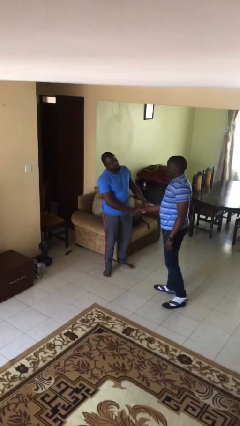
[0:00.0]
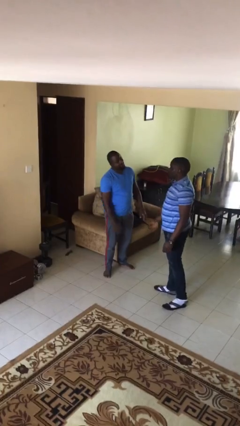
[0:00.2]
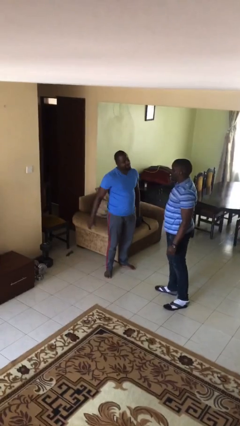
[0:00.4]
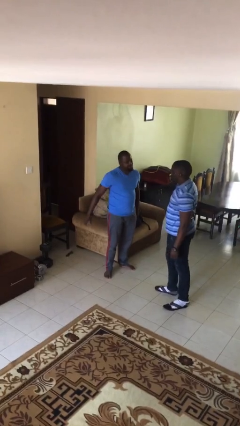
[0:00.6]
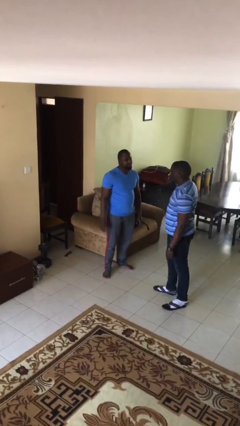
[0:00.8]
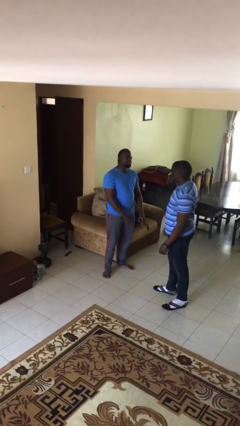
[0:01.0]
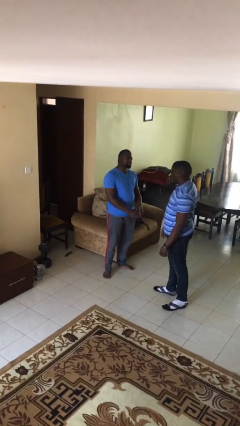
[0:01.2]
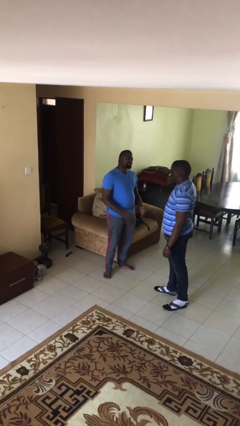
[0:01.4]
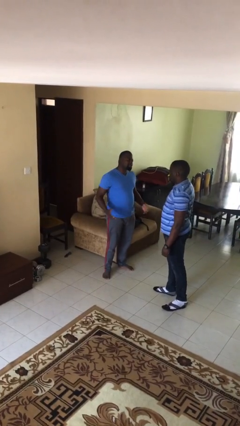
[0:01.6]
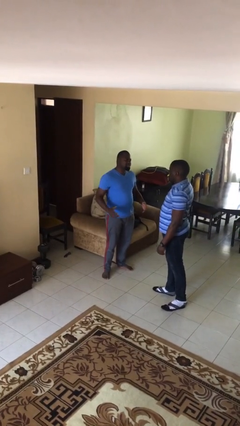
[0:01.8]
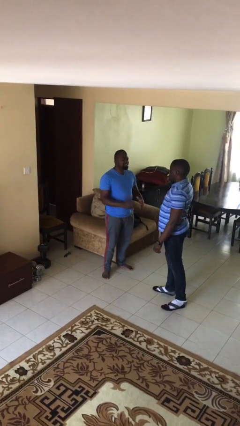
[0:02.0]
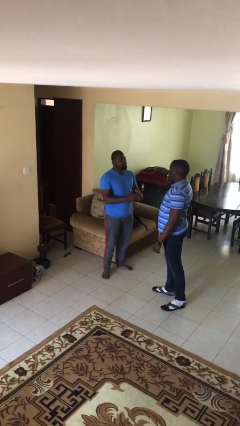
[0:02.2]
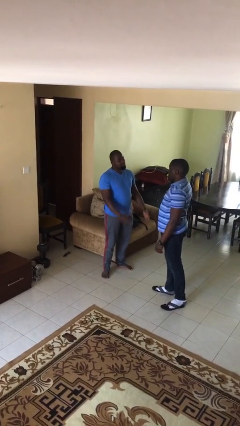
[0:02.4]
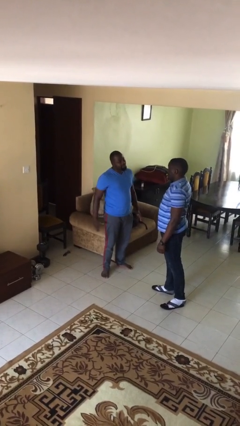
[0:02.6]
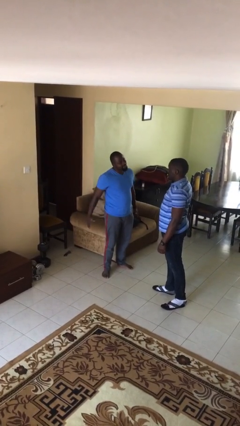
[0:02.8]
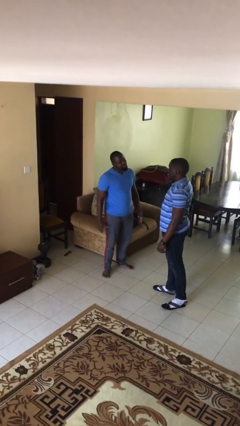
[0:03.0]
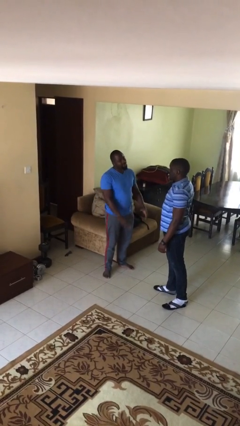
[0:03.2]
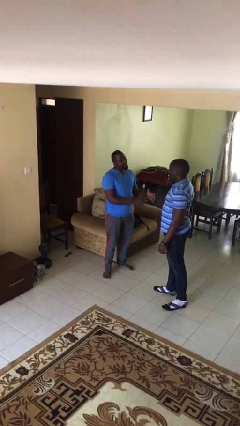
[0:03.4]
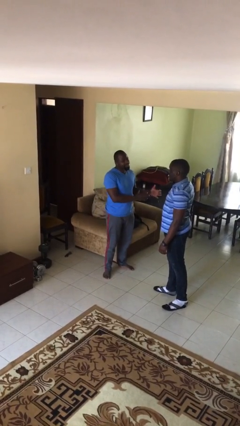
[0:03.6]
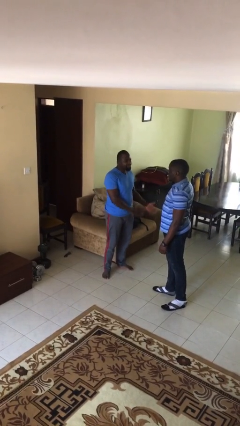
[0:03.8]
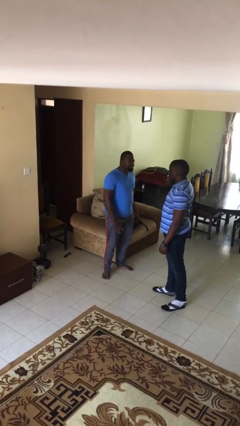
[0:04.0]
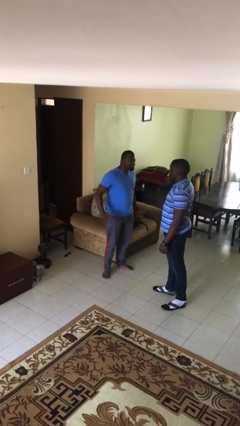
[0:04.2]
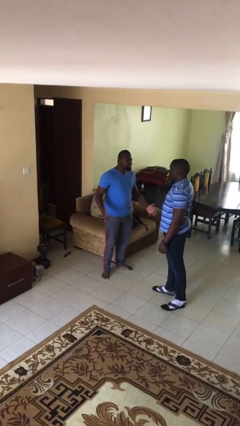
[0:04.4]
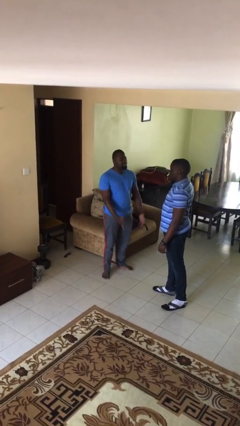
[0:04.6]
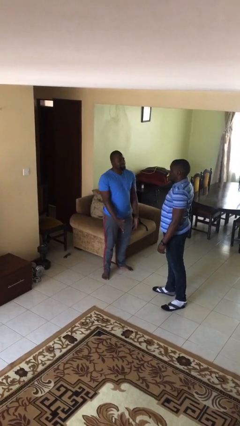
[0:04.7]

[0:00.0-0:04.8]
person talks to person

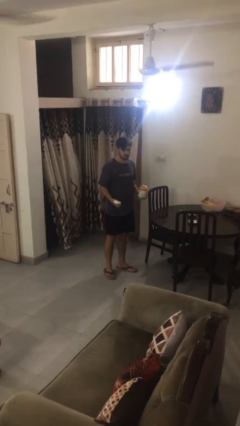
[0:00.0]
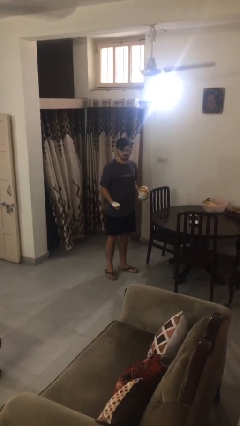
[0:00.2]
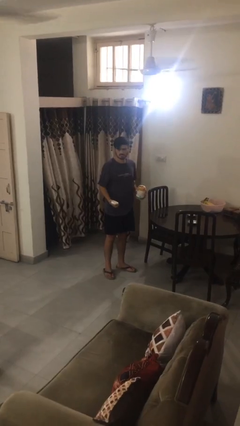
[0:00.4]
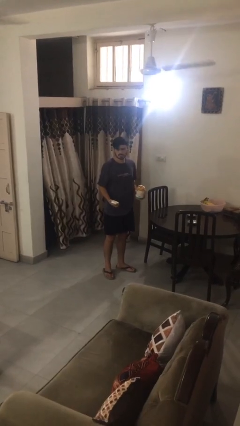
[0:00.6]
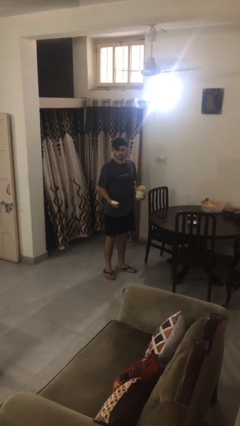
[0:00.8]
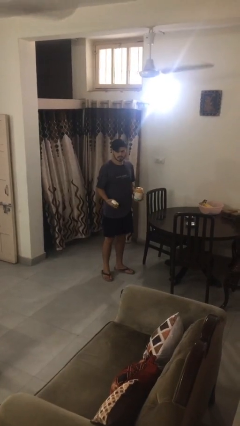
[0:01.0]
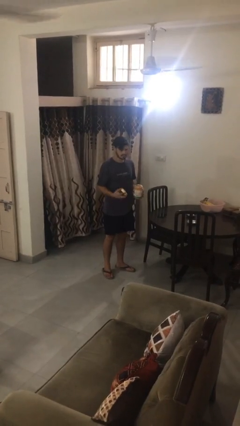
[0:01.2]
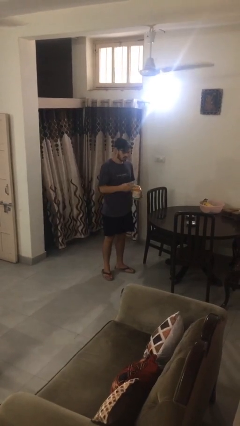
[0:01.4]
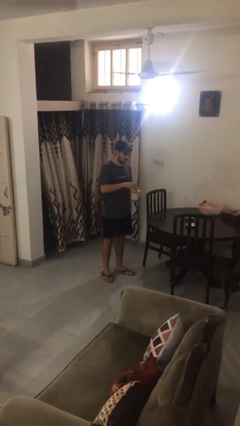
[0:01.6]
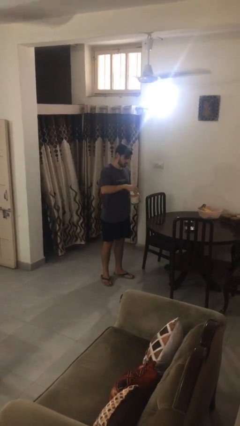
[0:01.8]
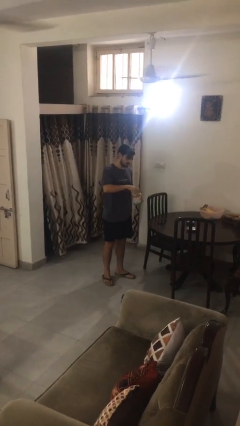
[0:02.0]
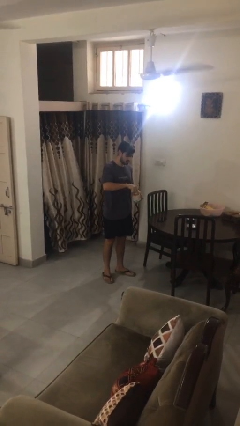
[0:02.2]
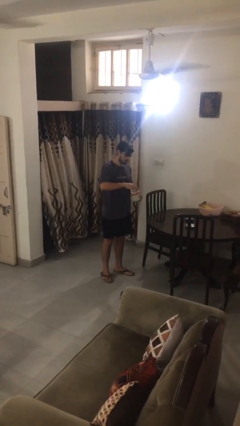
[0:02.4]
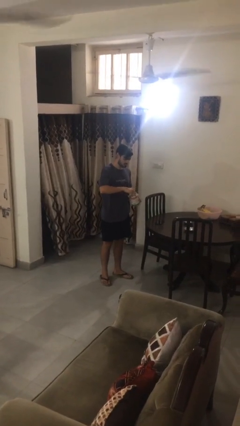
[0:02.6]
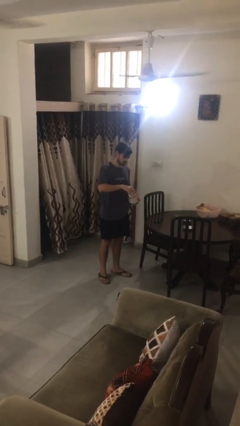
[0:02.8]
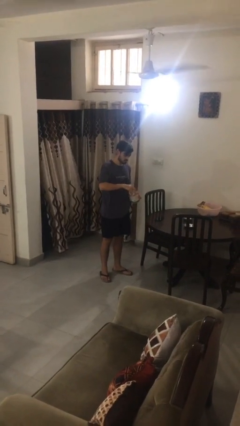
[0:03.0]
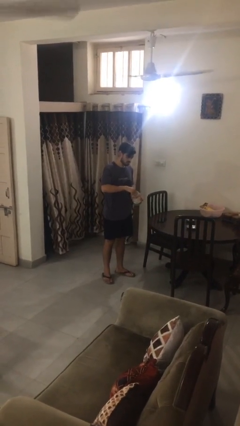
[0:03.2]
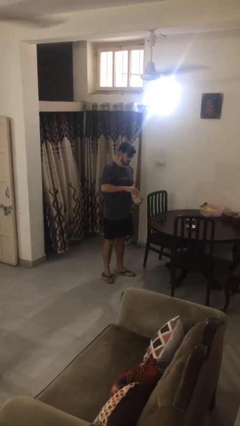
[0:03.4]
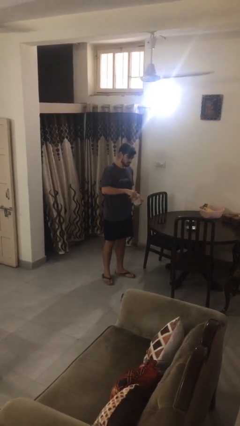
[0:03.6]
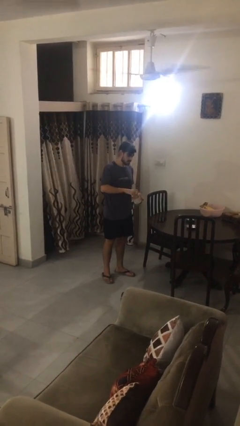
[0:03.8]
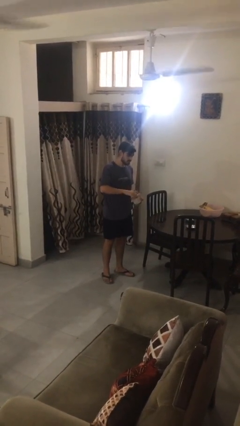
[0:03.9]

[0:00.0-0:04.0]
person closes jar

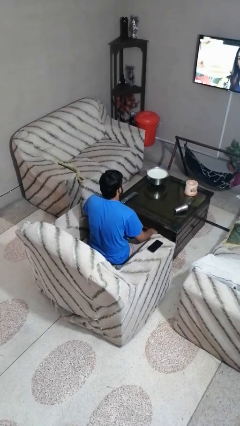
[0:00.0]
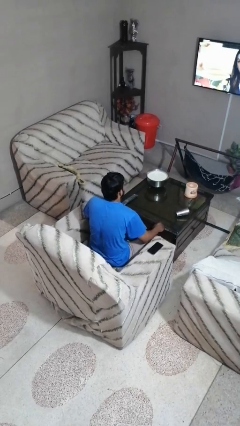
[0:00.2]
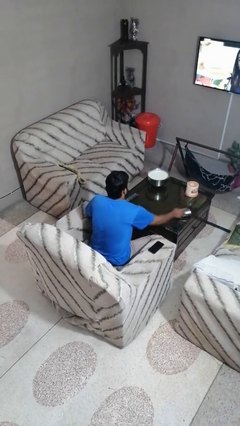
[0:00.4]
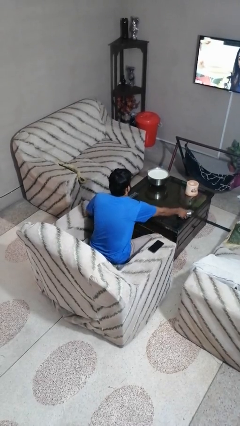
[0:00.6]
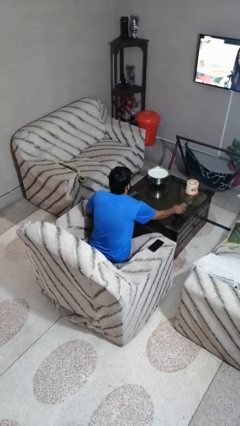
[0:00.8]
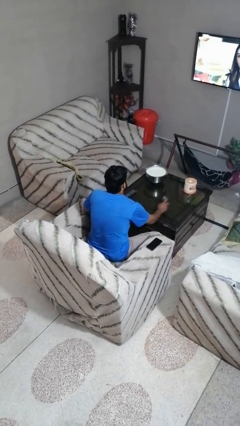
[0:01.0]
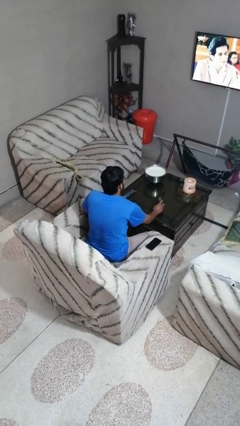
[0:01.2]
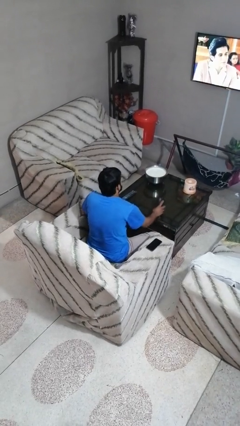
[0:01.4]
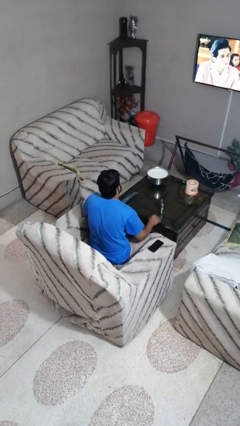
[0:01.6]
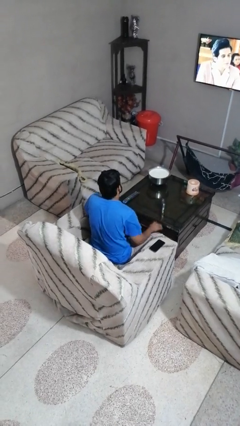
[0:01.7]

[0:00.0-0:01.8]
person sets upright glass

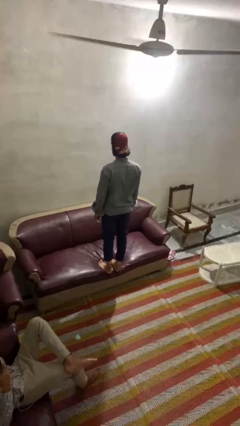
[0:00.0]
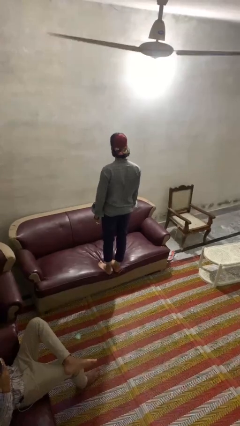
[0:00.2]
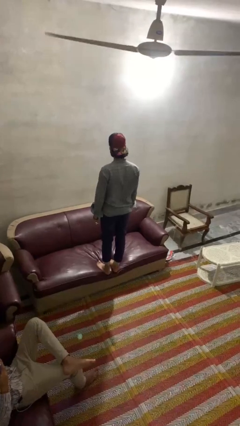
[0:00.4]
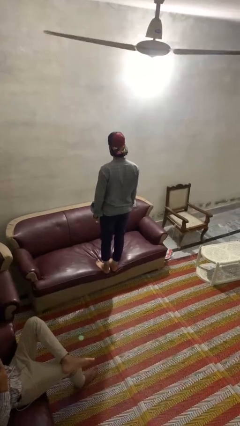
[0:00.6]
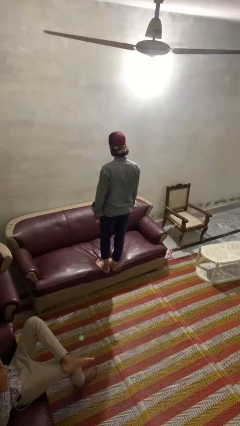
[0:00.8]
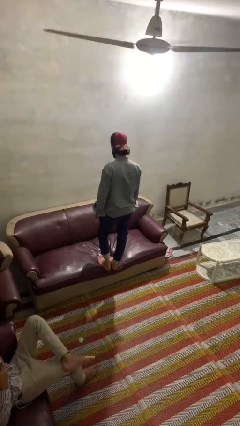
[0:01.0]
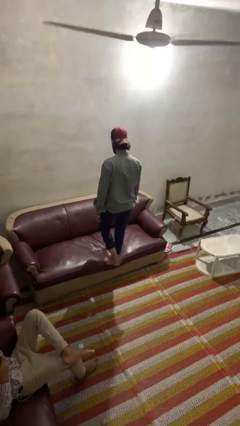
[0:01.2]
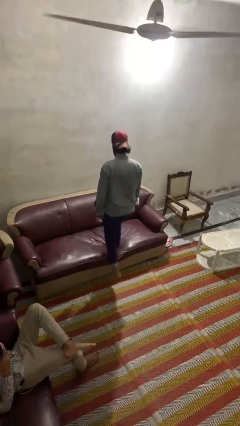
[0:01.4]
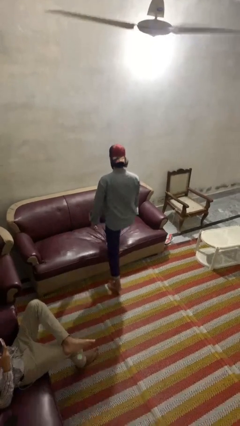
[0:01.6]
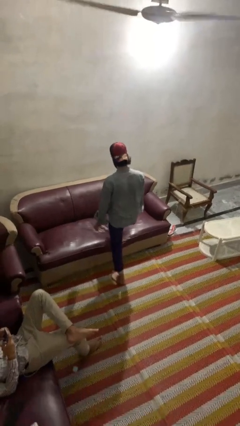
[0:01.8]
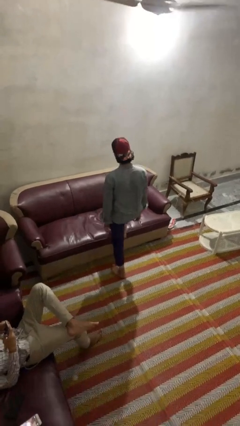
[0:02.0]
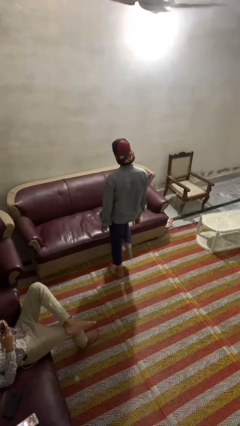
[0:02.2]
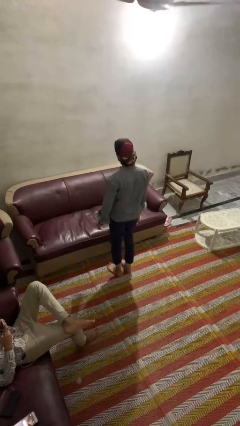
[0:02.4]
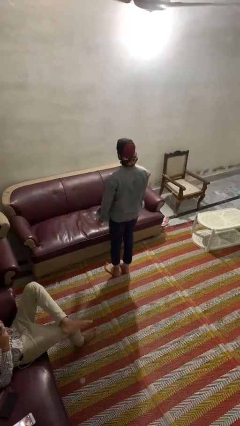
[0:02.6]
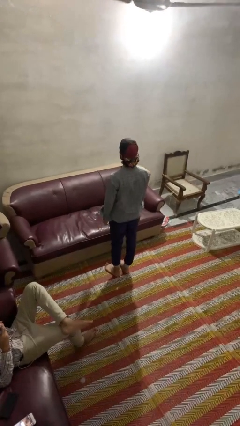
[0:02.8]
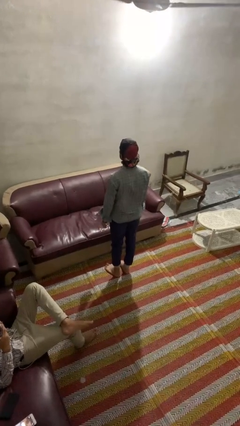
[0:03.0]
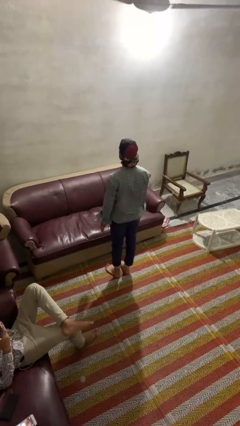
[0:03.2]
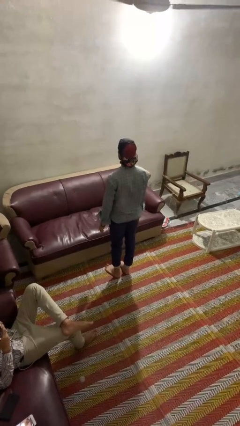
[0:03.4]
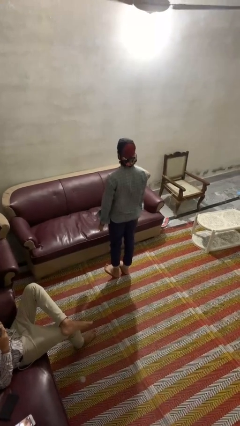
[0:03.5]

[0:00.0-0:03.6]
person climbs off couch

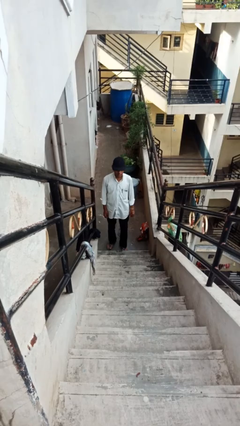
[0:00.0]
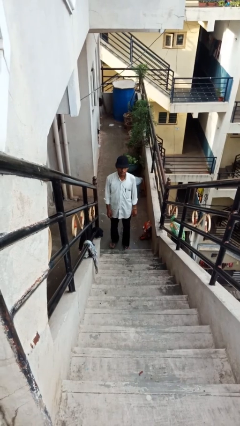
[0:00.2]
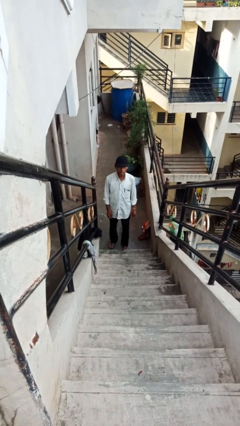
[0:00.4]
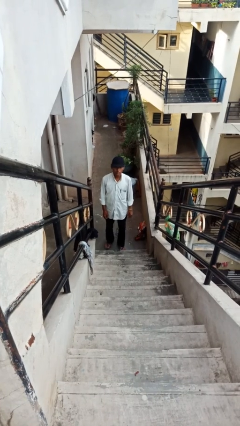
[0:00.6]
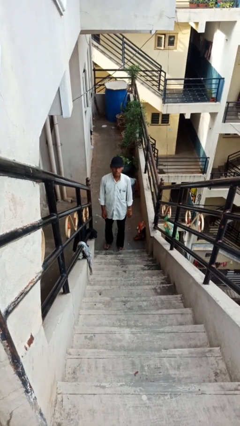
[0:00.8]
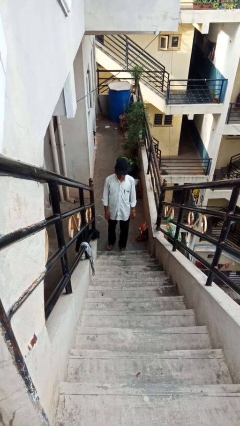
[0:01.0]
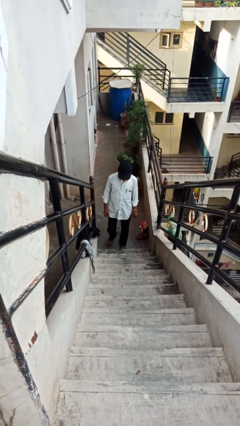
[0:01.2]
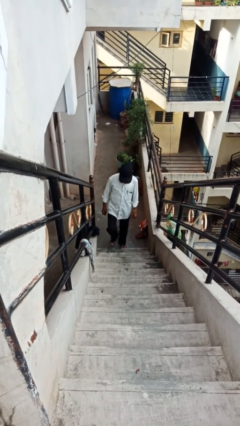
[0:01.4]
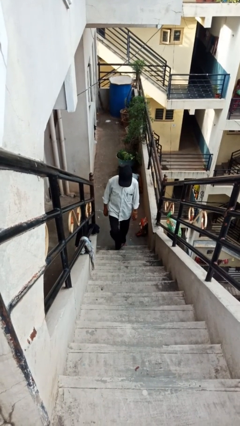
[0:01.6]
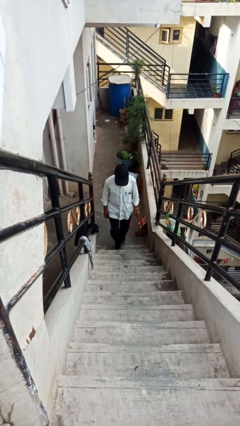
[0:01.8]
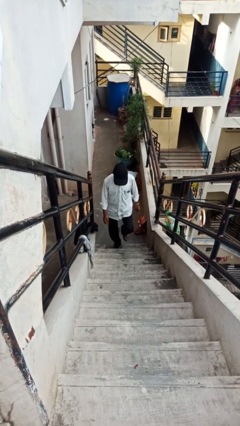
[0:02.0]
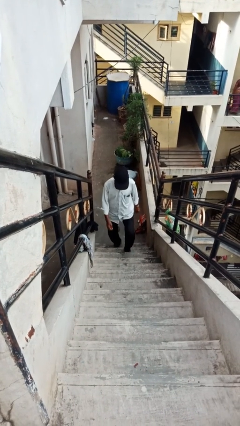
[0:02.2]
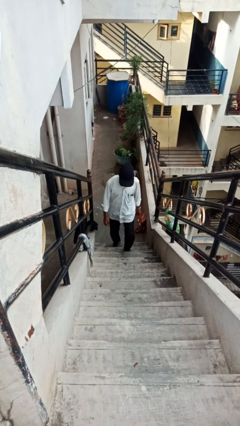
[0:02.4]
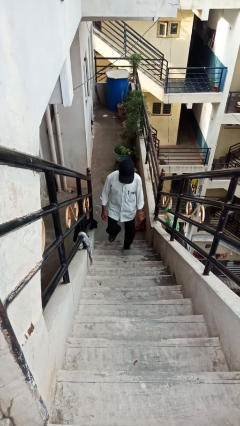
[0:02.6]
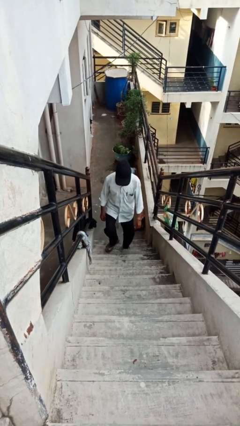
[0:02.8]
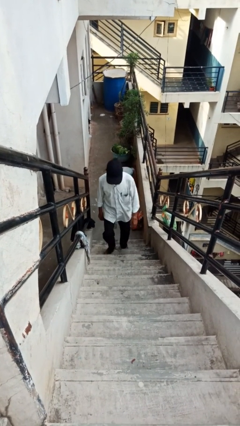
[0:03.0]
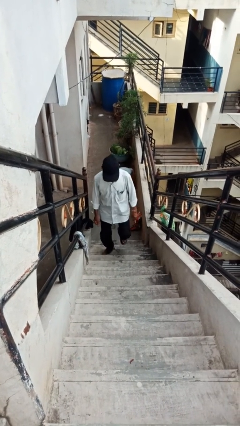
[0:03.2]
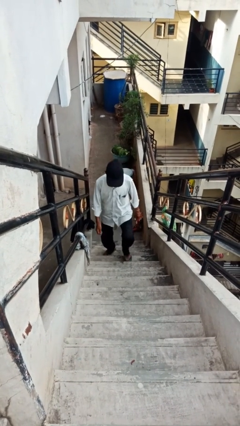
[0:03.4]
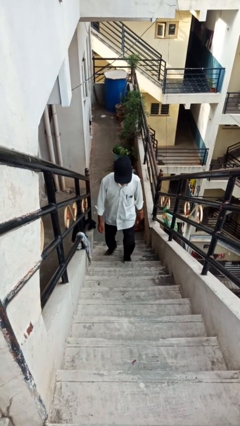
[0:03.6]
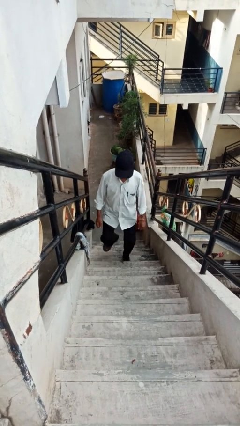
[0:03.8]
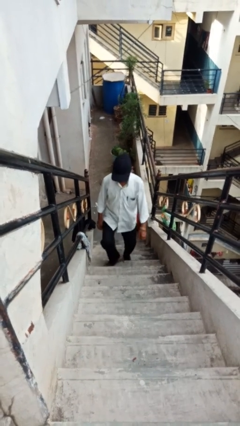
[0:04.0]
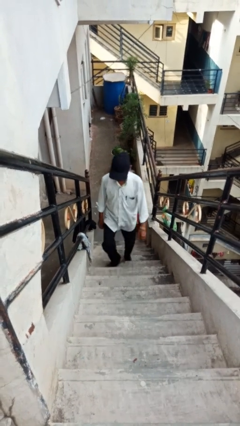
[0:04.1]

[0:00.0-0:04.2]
person climbs up stairs
